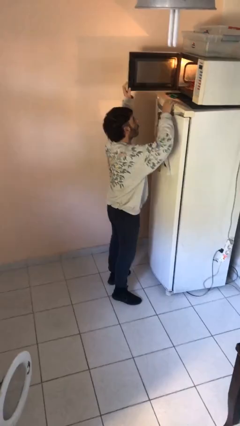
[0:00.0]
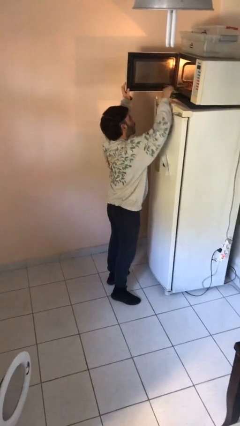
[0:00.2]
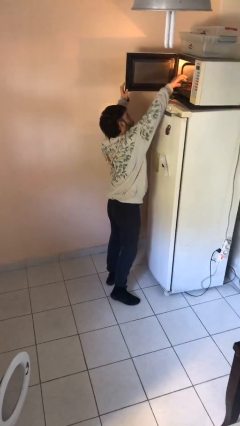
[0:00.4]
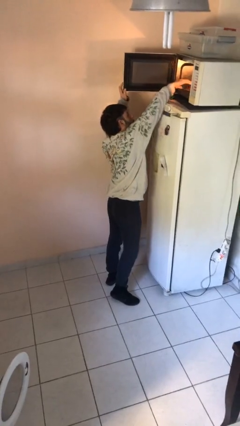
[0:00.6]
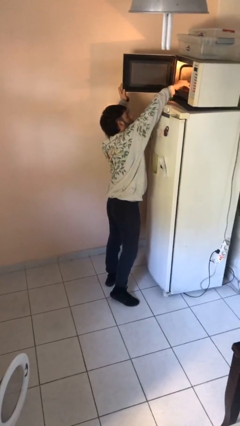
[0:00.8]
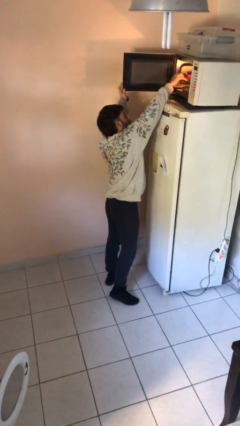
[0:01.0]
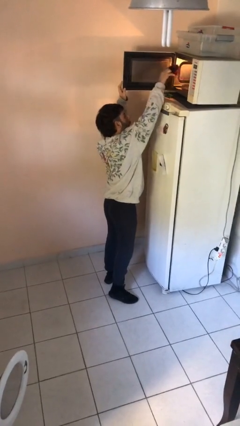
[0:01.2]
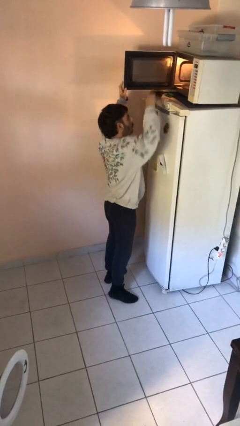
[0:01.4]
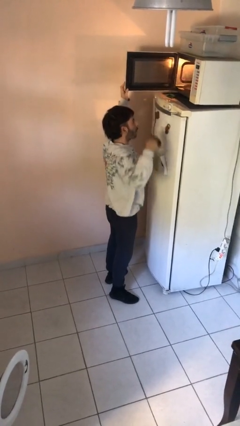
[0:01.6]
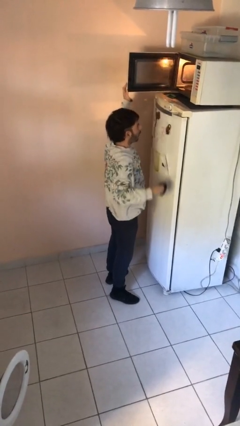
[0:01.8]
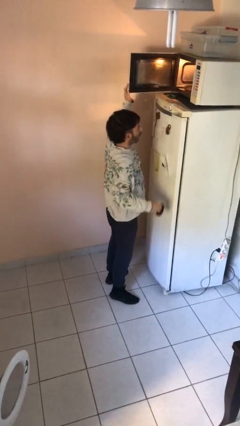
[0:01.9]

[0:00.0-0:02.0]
person takes object from microwave

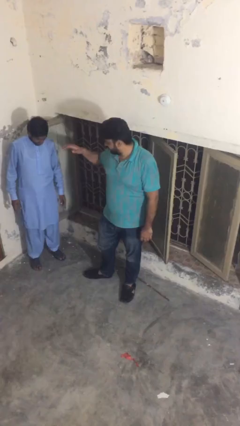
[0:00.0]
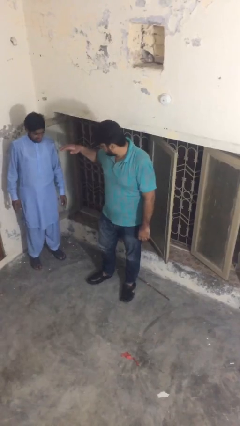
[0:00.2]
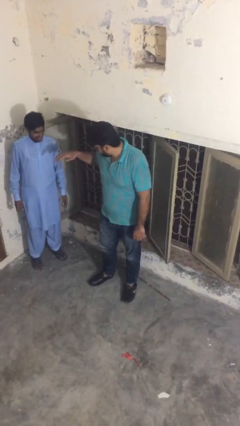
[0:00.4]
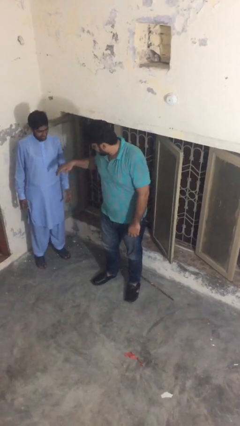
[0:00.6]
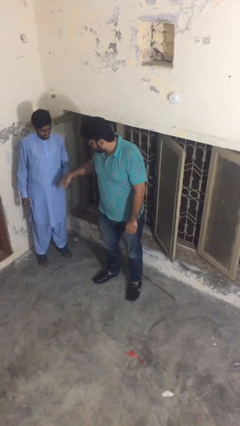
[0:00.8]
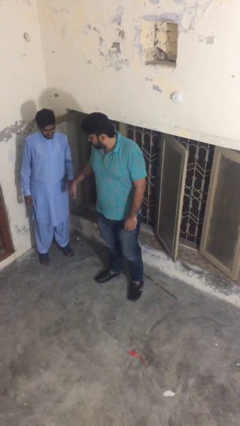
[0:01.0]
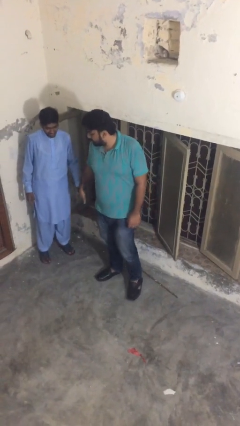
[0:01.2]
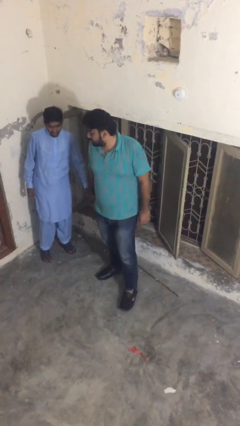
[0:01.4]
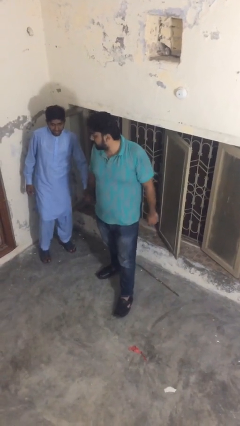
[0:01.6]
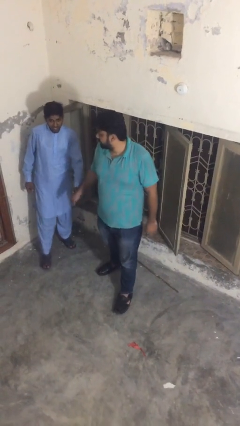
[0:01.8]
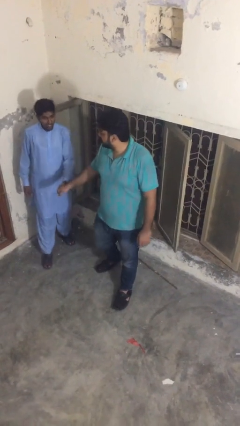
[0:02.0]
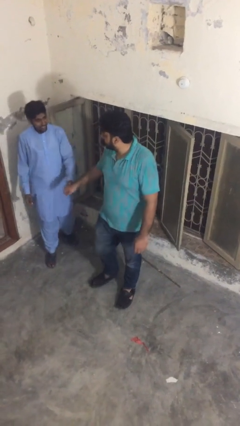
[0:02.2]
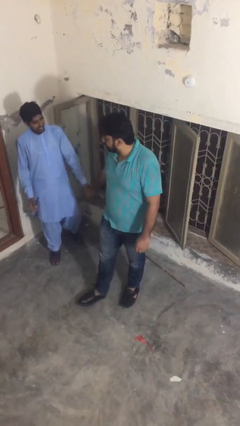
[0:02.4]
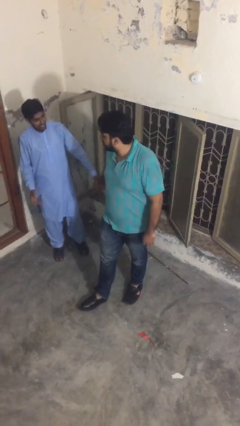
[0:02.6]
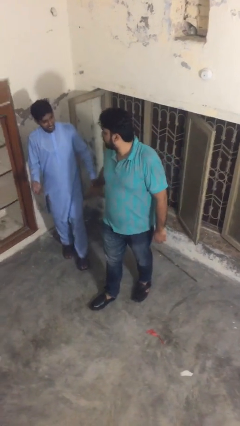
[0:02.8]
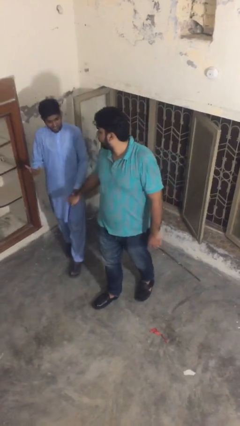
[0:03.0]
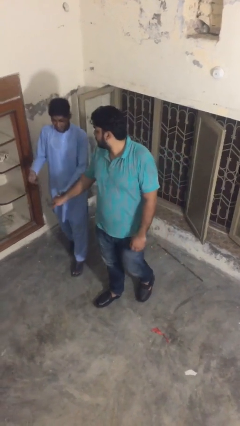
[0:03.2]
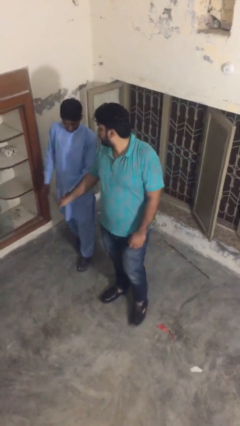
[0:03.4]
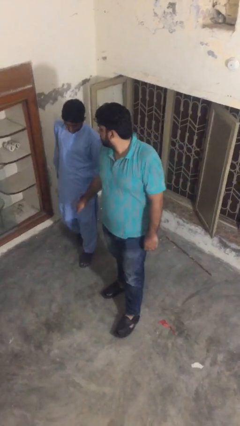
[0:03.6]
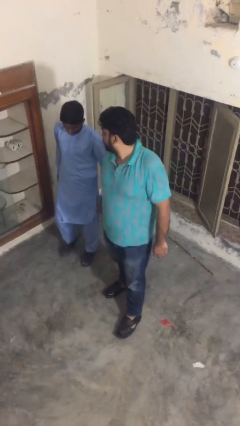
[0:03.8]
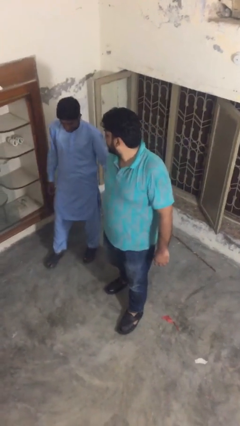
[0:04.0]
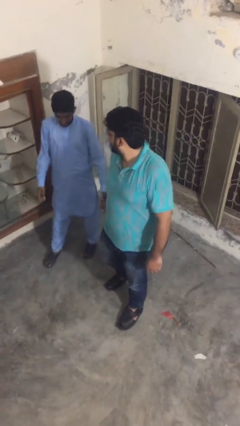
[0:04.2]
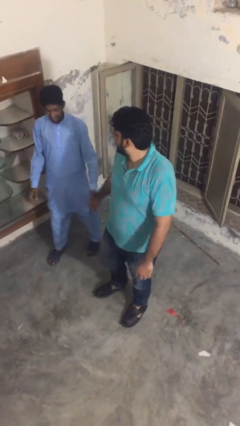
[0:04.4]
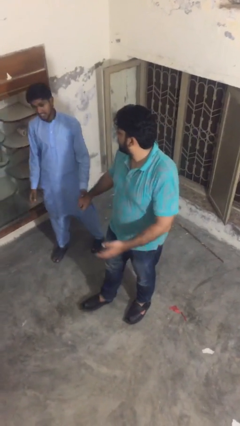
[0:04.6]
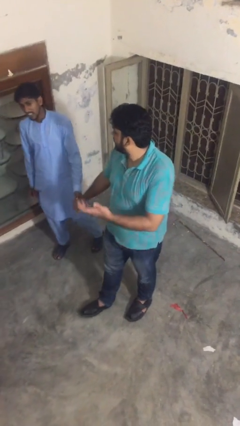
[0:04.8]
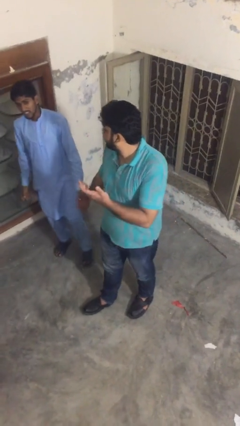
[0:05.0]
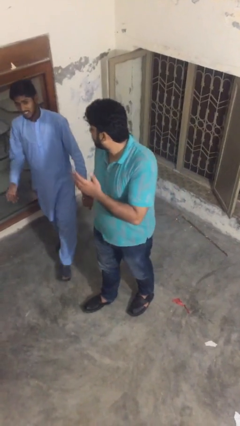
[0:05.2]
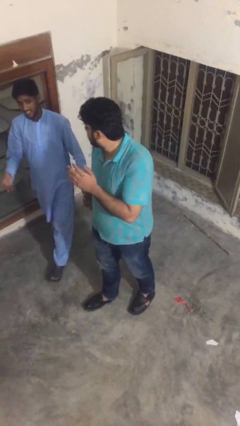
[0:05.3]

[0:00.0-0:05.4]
person holds hand

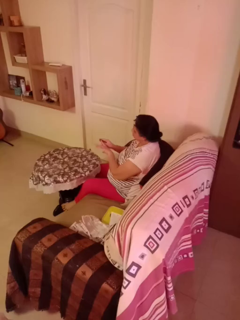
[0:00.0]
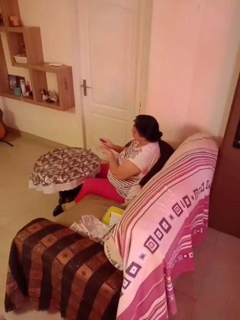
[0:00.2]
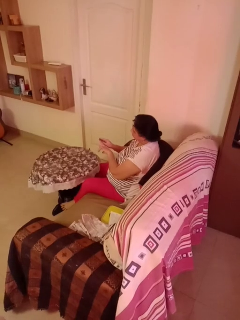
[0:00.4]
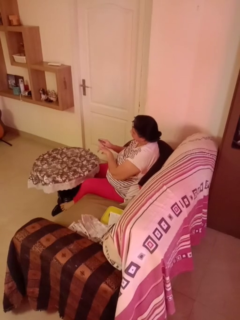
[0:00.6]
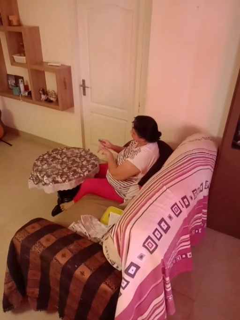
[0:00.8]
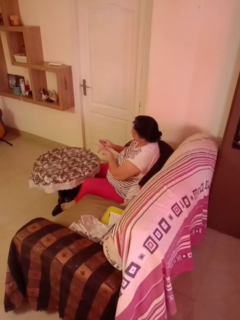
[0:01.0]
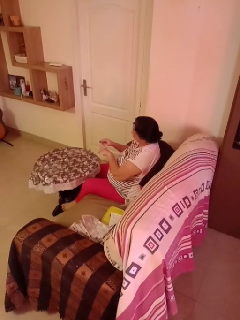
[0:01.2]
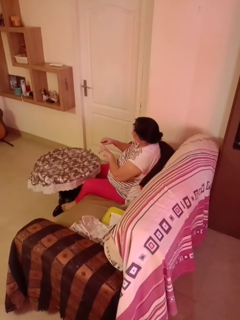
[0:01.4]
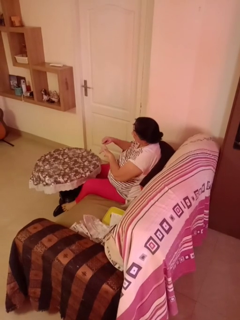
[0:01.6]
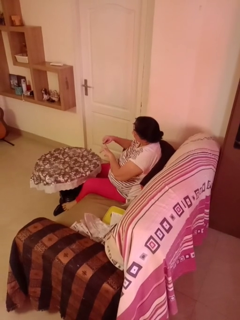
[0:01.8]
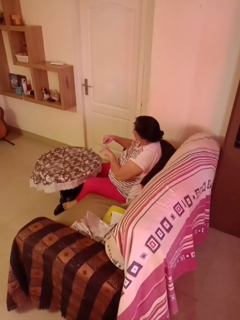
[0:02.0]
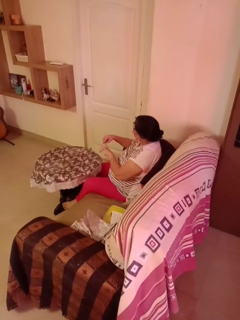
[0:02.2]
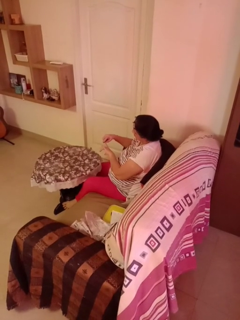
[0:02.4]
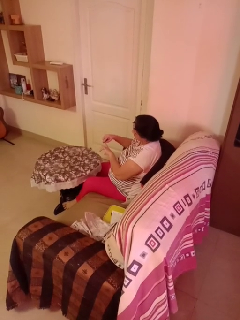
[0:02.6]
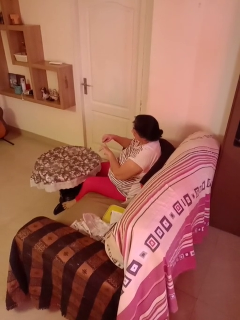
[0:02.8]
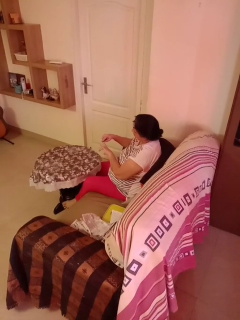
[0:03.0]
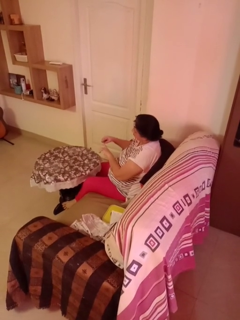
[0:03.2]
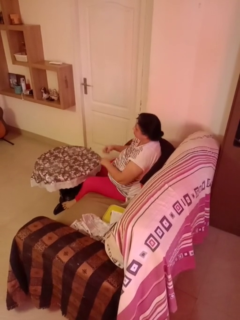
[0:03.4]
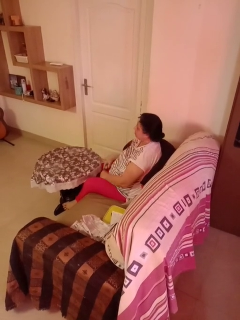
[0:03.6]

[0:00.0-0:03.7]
person files fingernails

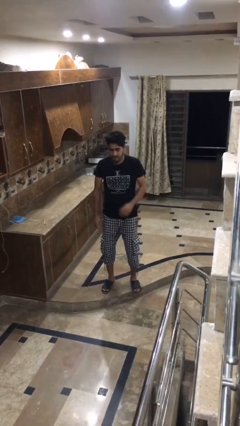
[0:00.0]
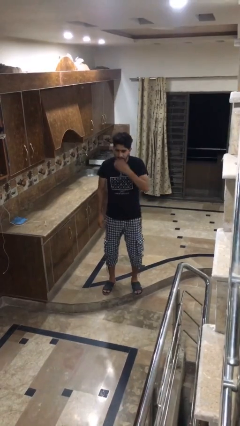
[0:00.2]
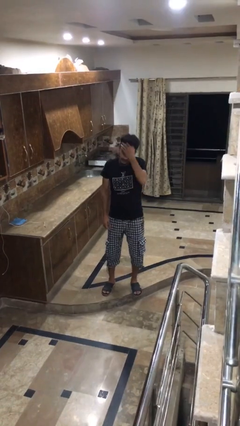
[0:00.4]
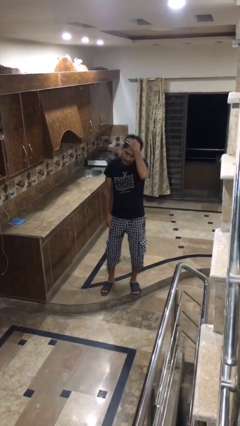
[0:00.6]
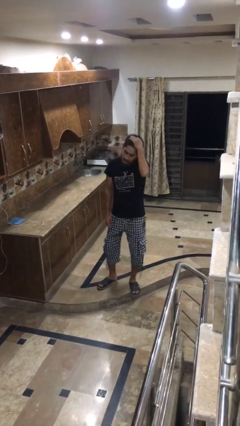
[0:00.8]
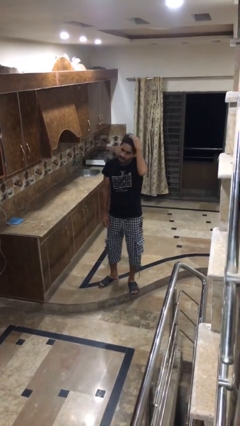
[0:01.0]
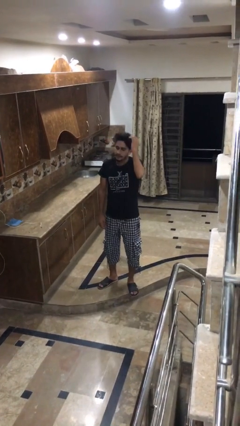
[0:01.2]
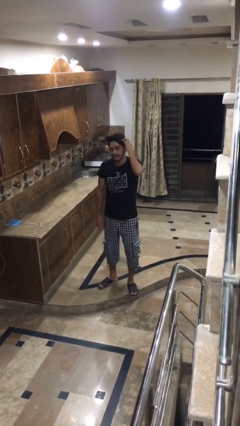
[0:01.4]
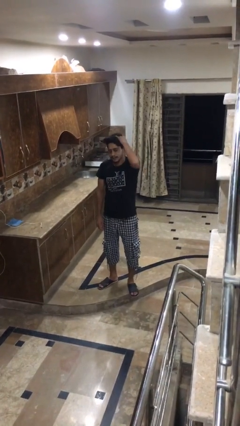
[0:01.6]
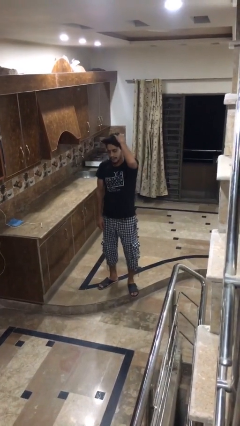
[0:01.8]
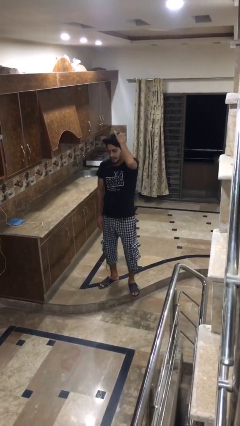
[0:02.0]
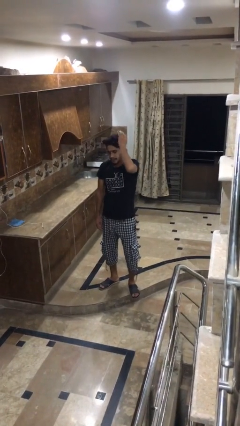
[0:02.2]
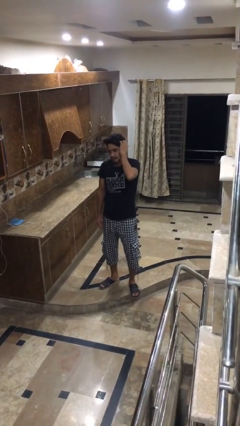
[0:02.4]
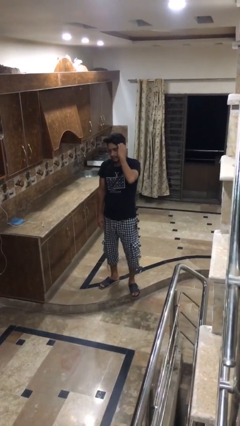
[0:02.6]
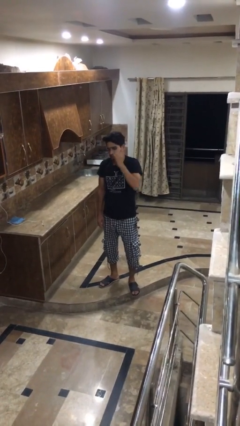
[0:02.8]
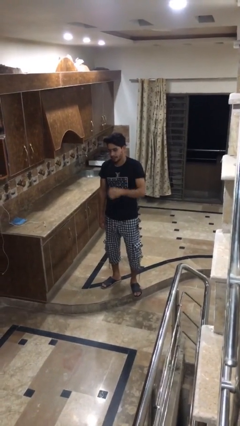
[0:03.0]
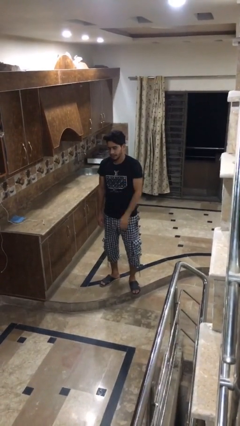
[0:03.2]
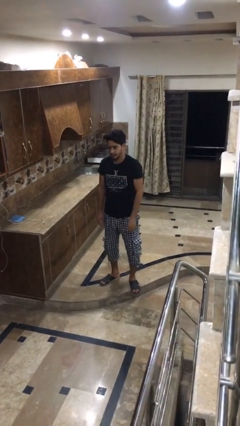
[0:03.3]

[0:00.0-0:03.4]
person strokes hair

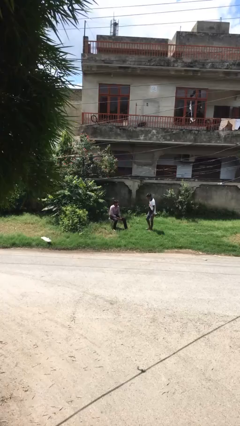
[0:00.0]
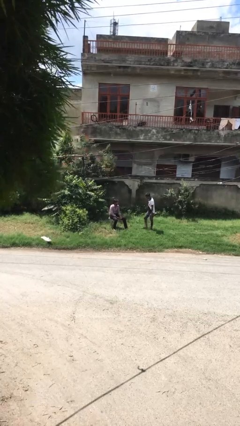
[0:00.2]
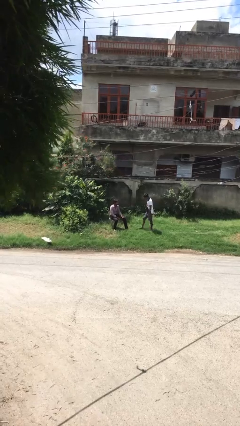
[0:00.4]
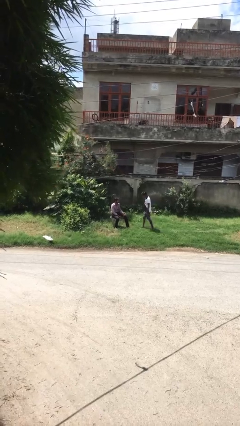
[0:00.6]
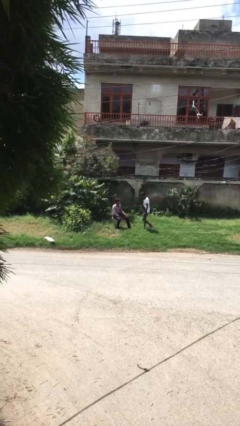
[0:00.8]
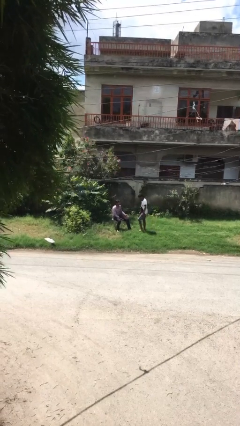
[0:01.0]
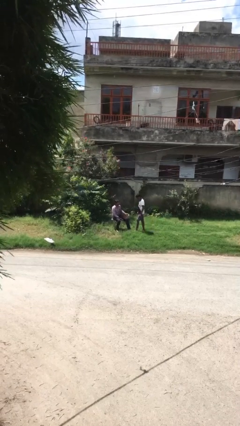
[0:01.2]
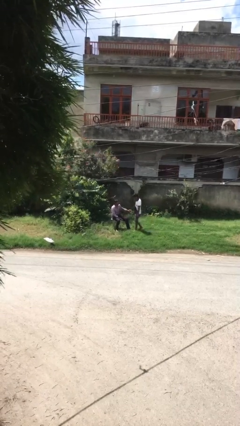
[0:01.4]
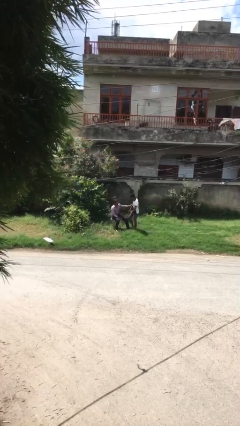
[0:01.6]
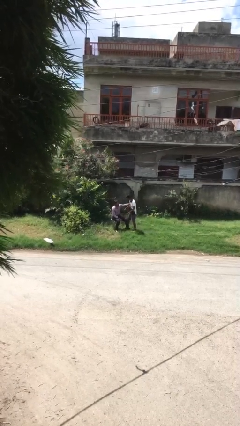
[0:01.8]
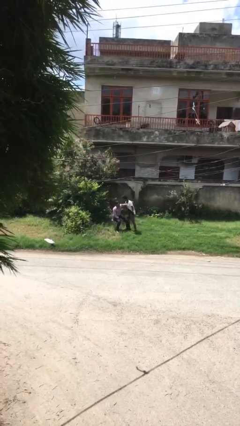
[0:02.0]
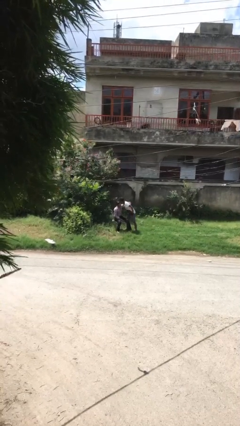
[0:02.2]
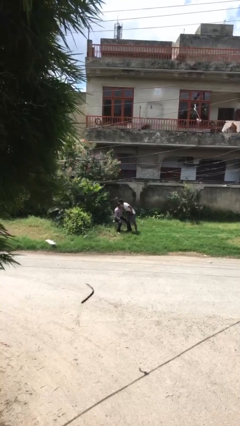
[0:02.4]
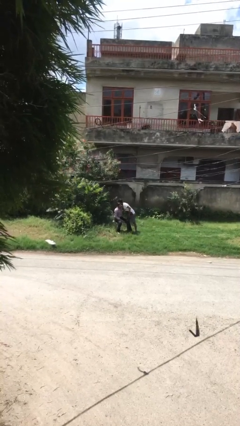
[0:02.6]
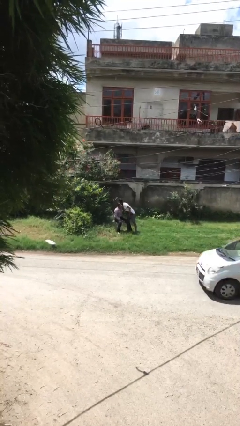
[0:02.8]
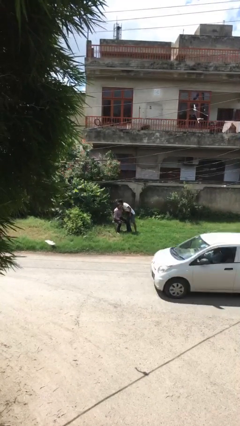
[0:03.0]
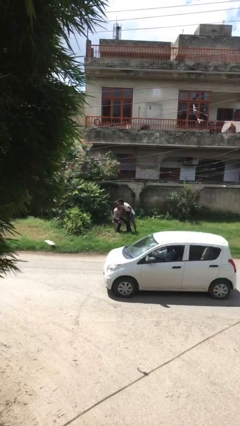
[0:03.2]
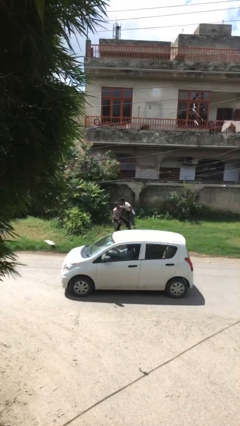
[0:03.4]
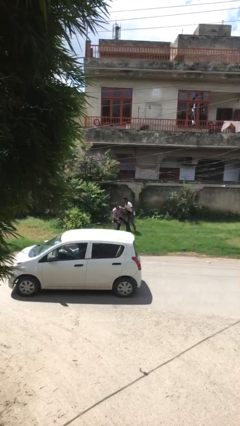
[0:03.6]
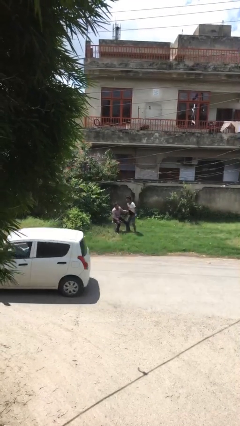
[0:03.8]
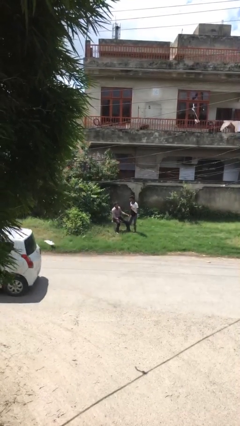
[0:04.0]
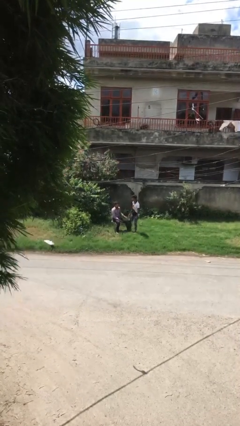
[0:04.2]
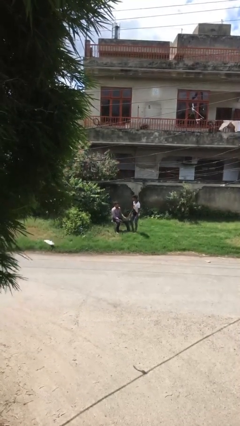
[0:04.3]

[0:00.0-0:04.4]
person embraces person

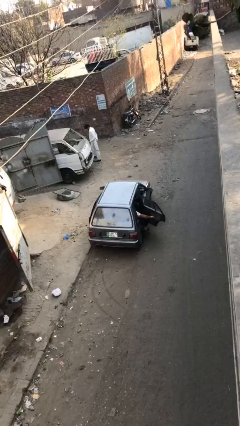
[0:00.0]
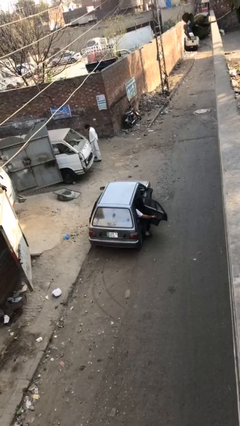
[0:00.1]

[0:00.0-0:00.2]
car drops off person
